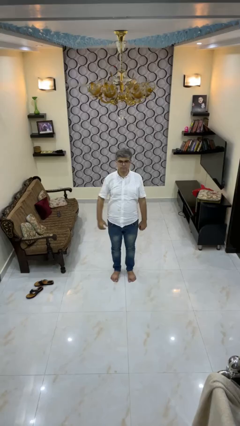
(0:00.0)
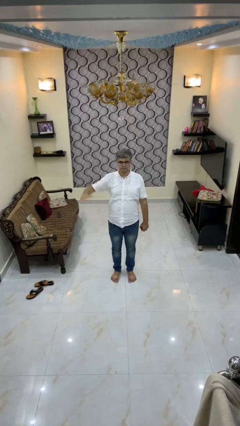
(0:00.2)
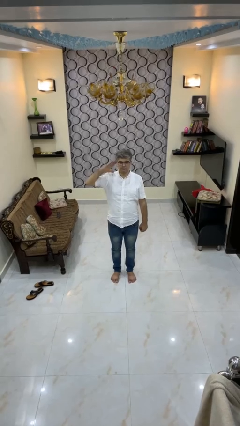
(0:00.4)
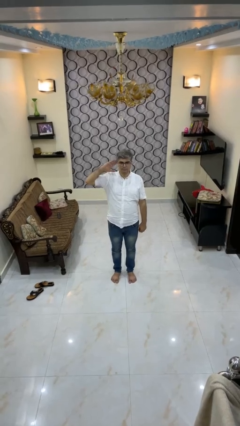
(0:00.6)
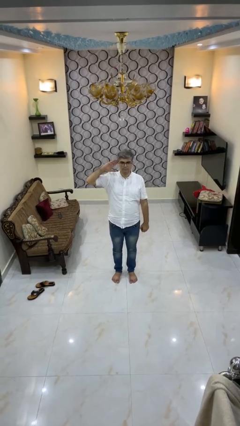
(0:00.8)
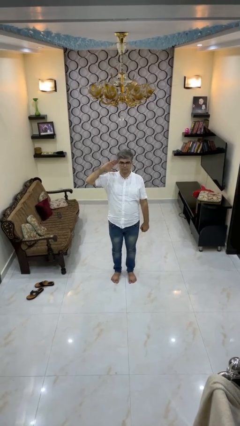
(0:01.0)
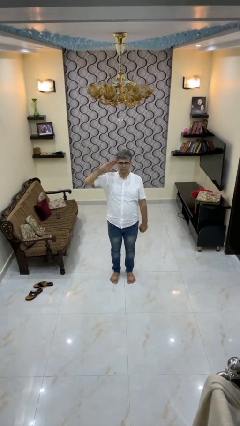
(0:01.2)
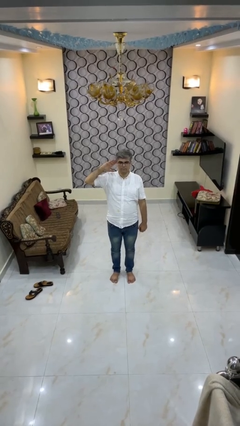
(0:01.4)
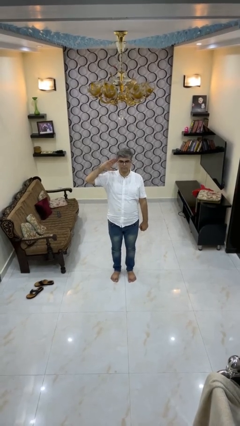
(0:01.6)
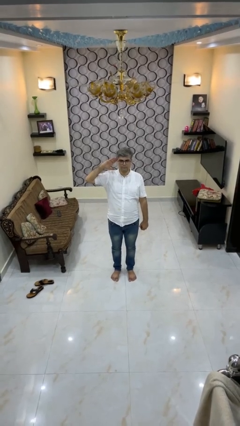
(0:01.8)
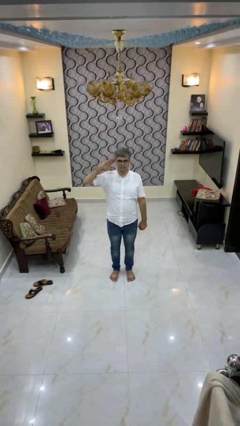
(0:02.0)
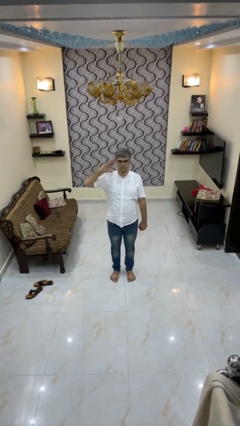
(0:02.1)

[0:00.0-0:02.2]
person salutes

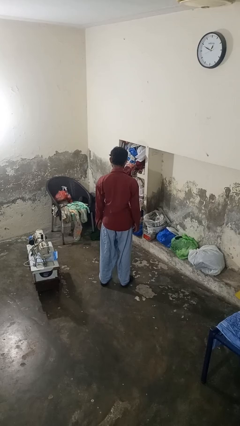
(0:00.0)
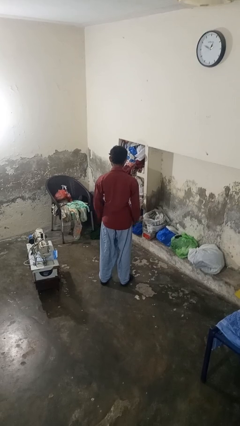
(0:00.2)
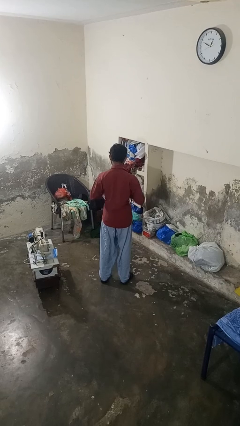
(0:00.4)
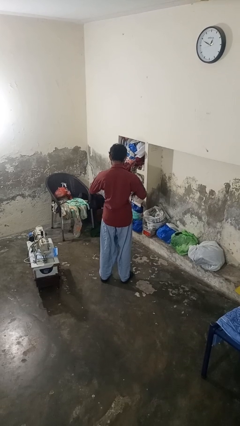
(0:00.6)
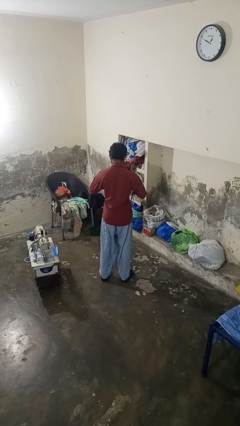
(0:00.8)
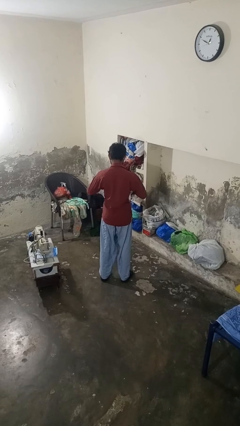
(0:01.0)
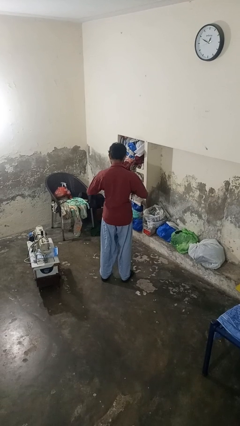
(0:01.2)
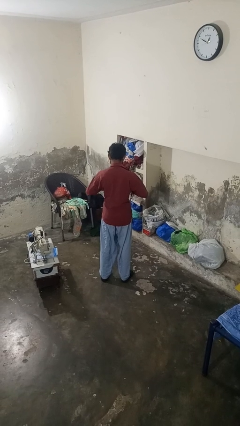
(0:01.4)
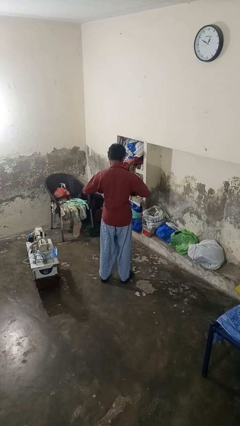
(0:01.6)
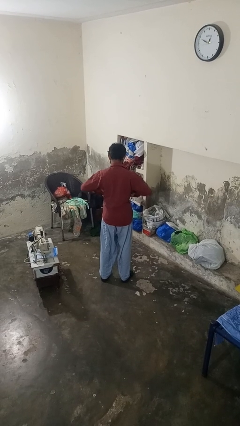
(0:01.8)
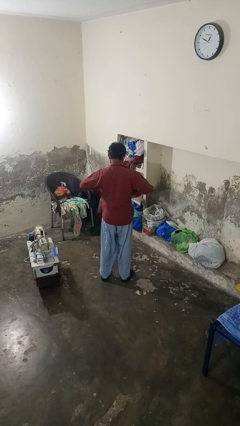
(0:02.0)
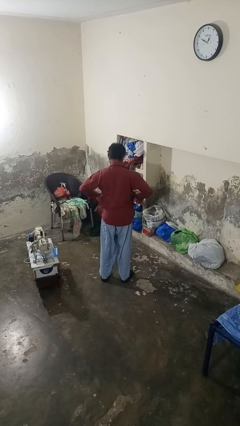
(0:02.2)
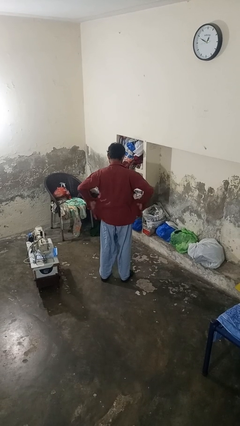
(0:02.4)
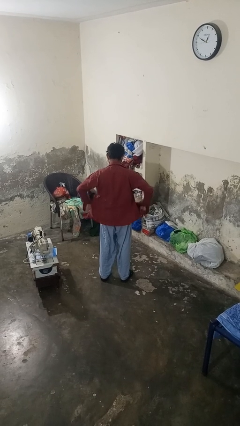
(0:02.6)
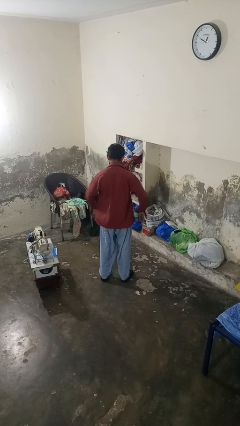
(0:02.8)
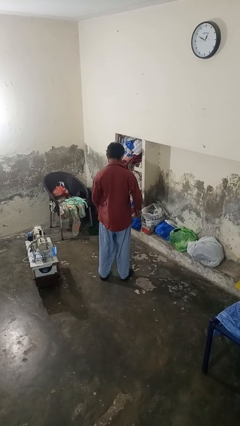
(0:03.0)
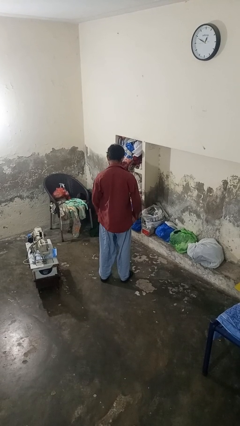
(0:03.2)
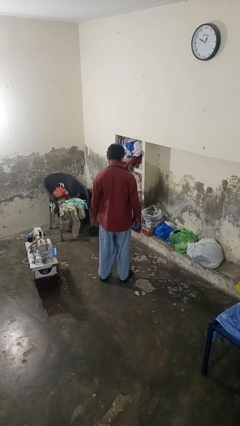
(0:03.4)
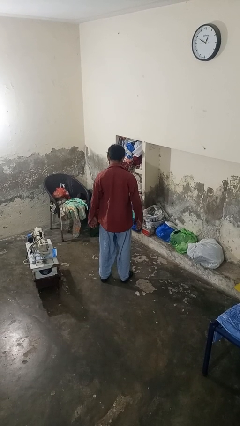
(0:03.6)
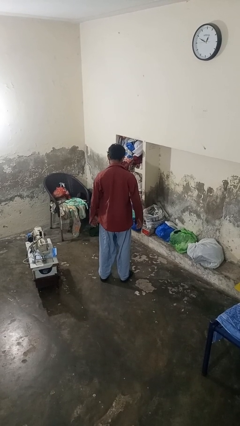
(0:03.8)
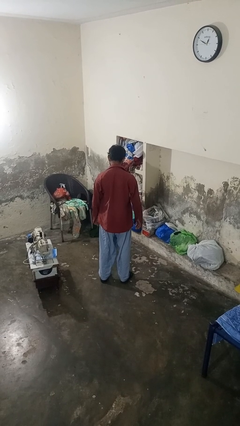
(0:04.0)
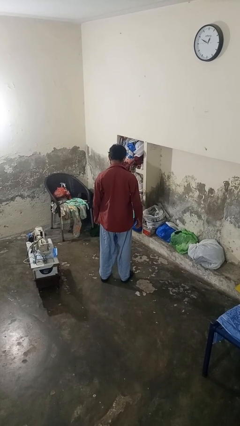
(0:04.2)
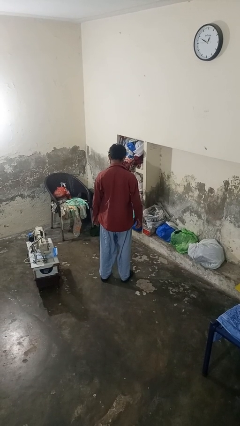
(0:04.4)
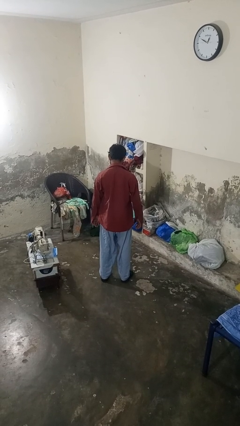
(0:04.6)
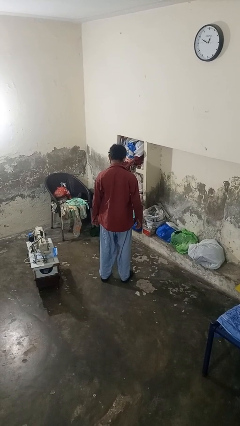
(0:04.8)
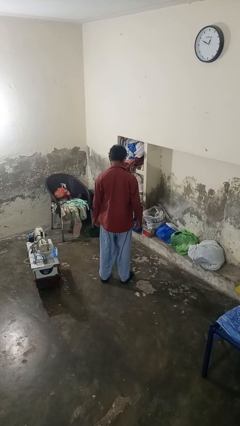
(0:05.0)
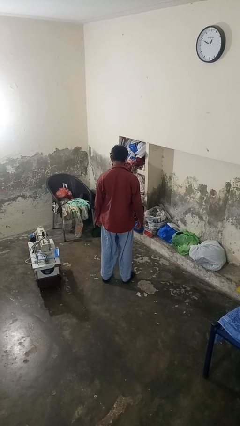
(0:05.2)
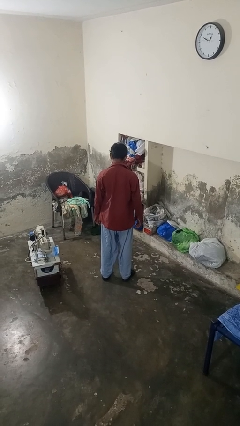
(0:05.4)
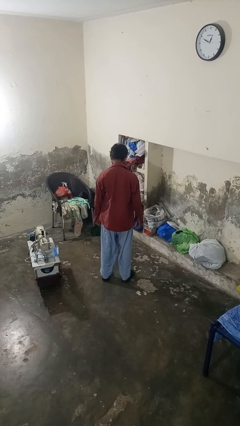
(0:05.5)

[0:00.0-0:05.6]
person unbuttons shirt

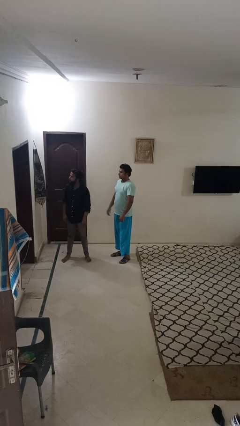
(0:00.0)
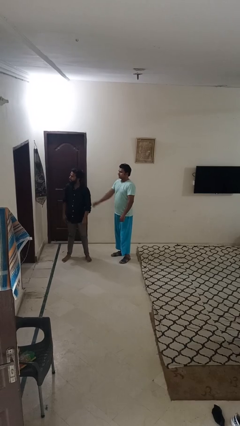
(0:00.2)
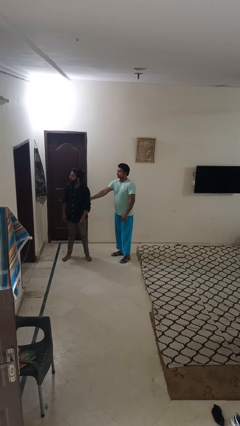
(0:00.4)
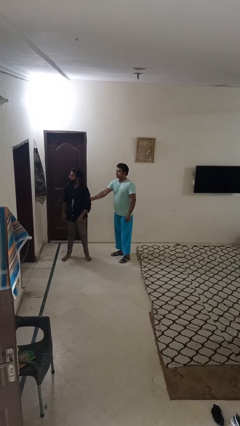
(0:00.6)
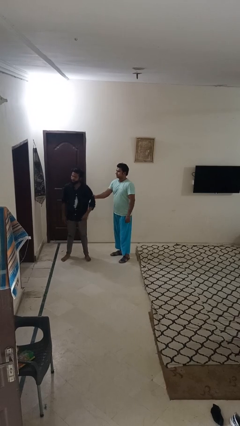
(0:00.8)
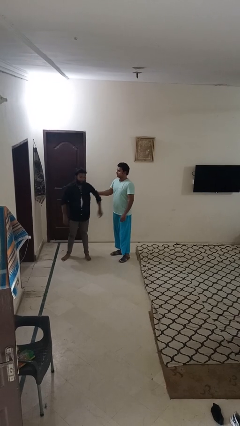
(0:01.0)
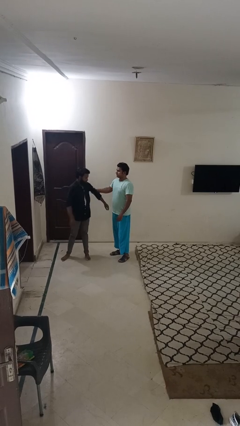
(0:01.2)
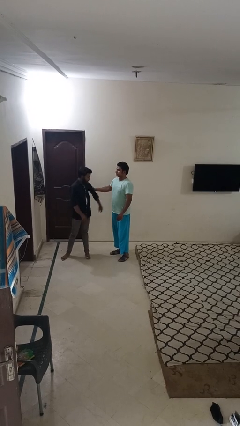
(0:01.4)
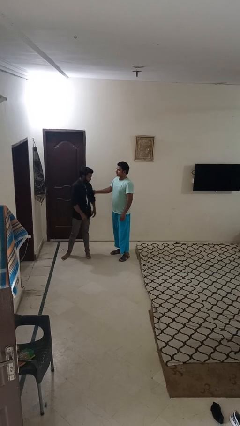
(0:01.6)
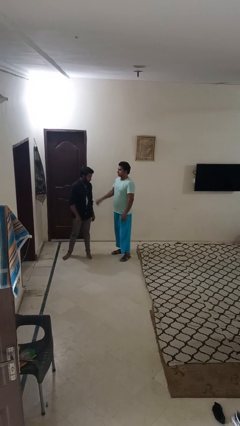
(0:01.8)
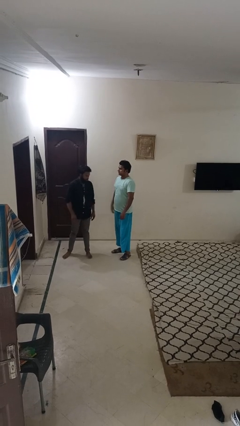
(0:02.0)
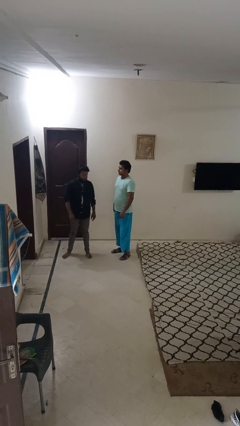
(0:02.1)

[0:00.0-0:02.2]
person grabs person by bicep

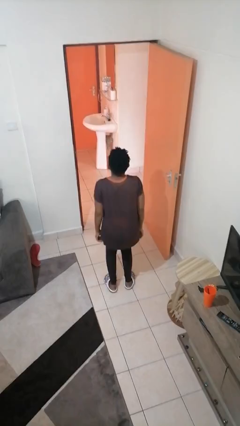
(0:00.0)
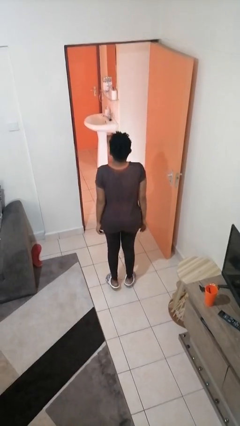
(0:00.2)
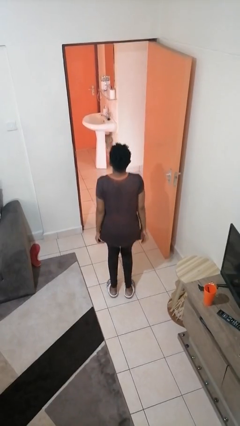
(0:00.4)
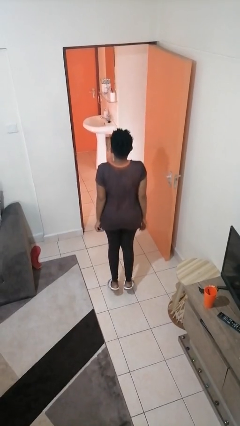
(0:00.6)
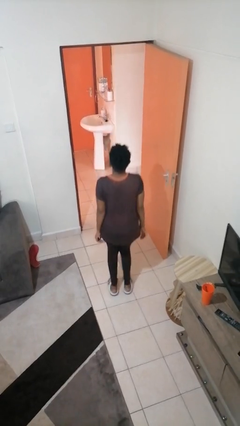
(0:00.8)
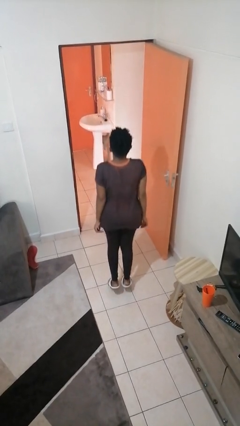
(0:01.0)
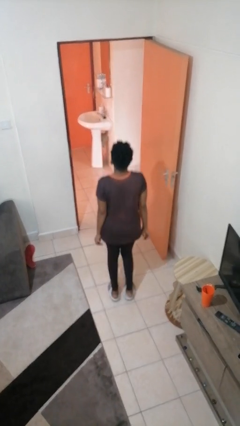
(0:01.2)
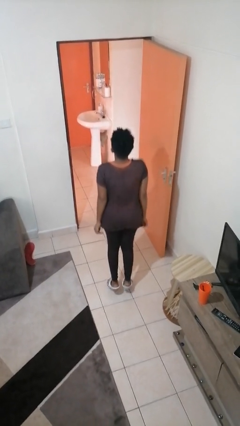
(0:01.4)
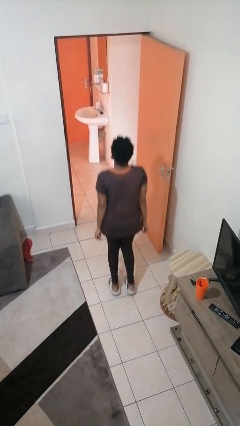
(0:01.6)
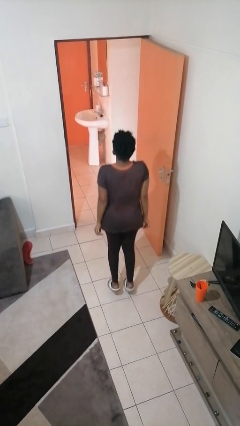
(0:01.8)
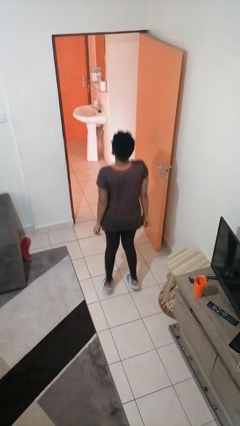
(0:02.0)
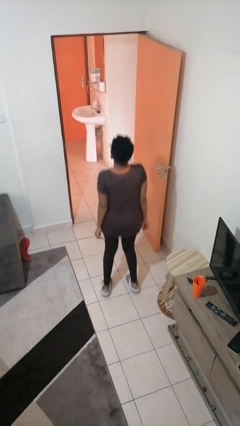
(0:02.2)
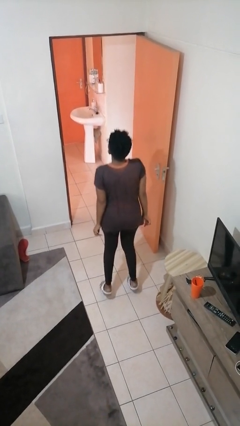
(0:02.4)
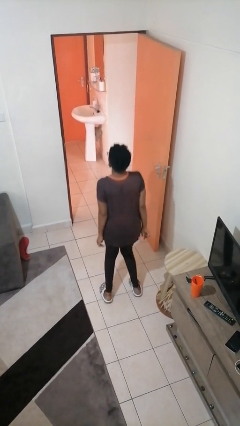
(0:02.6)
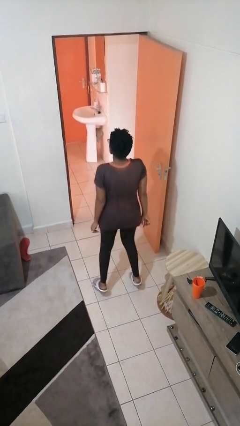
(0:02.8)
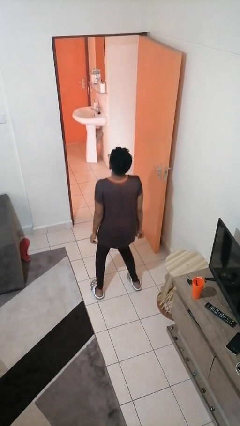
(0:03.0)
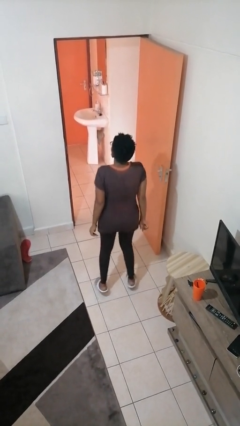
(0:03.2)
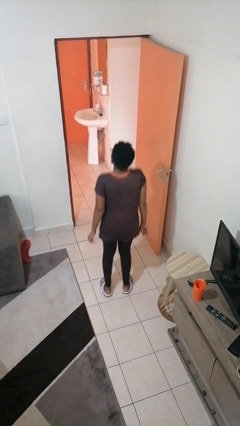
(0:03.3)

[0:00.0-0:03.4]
person jumps

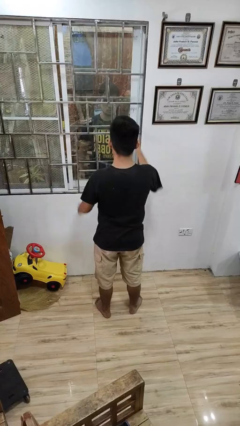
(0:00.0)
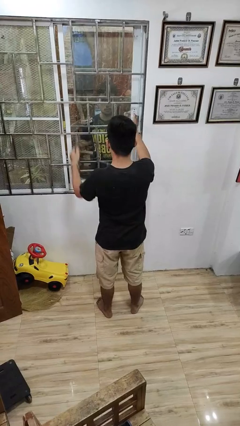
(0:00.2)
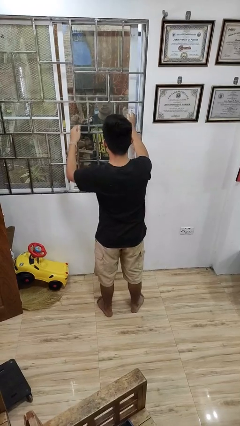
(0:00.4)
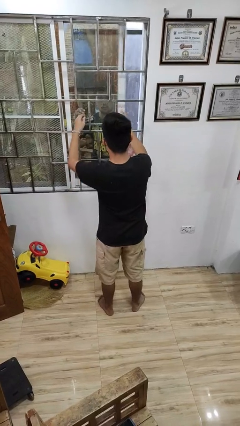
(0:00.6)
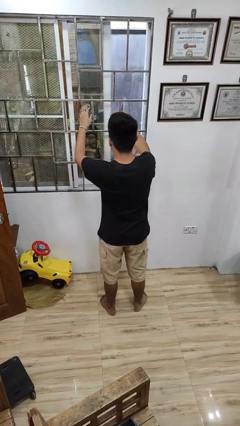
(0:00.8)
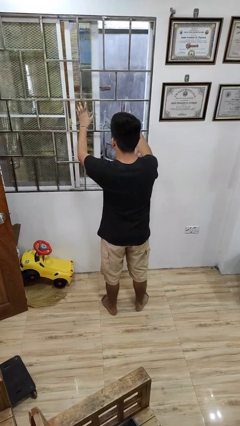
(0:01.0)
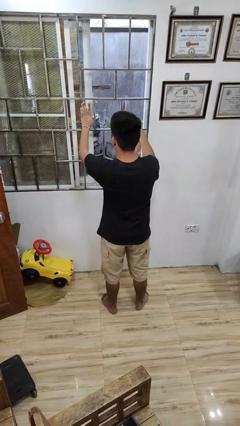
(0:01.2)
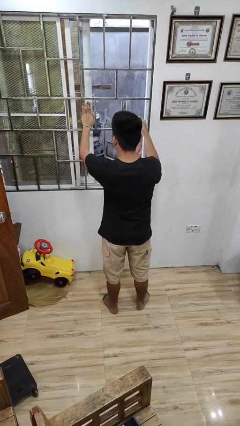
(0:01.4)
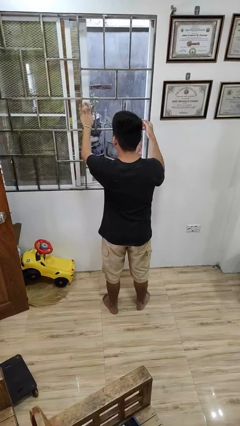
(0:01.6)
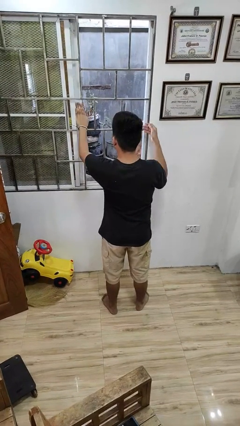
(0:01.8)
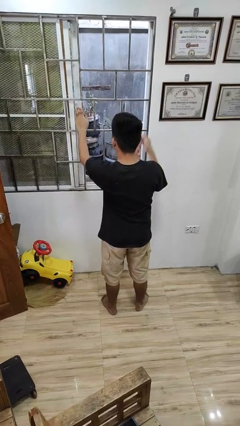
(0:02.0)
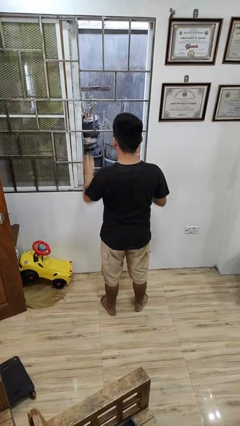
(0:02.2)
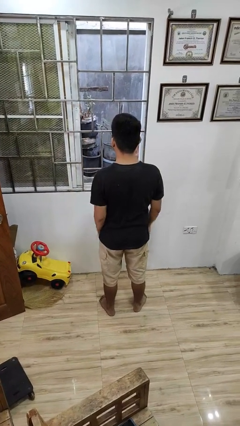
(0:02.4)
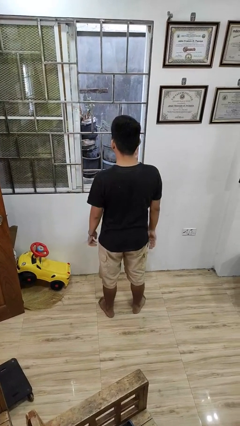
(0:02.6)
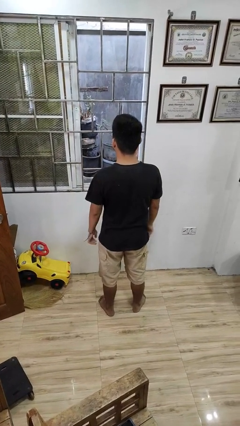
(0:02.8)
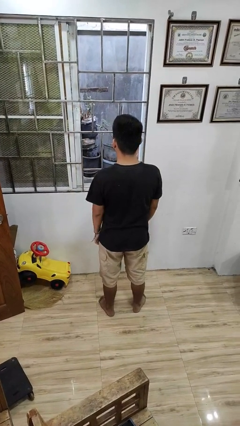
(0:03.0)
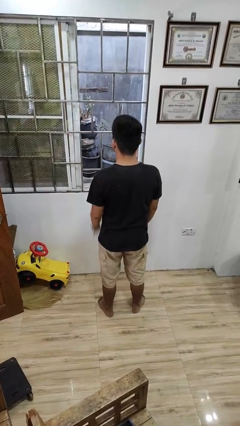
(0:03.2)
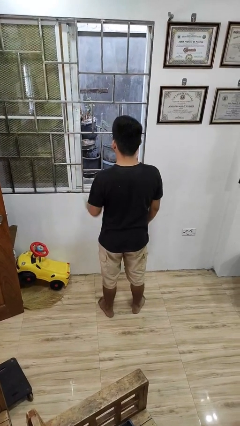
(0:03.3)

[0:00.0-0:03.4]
person opens home window

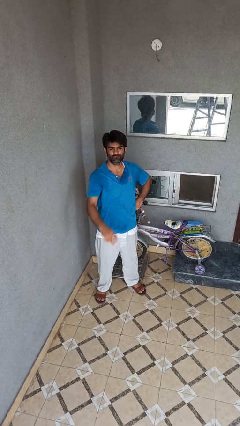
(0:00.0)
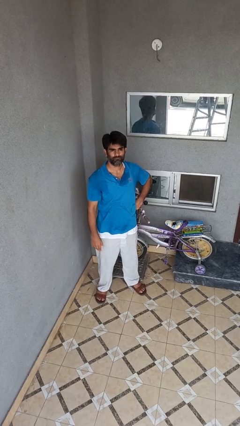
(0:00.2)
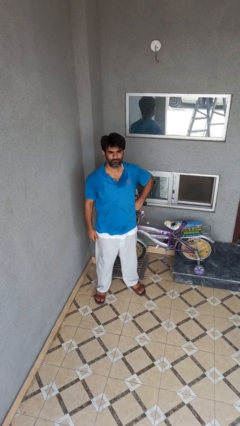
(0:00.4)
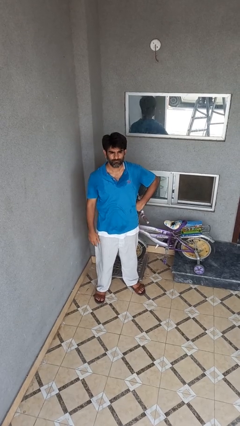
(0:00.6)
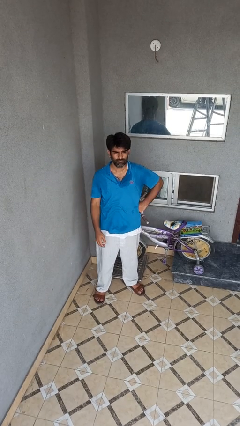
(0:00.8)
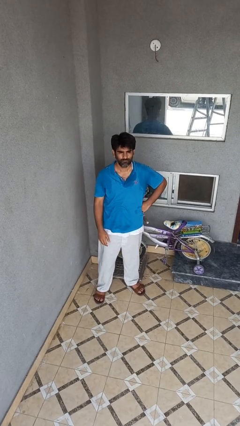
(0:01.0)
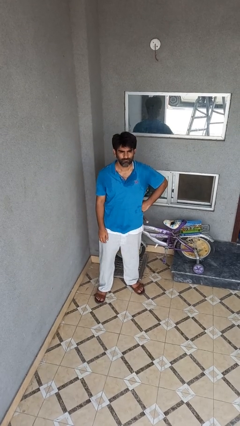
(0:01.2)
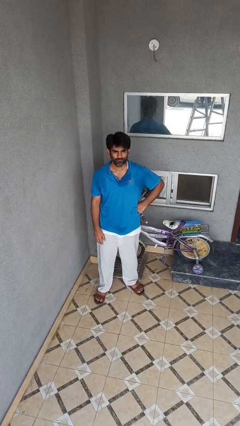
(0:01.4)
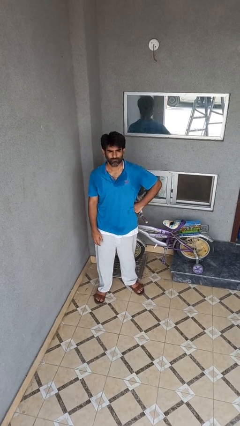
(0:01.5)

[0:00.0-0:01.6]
person gestures lower hand
